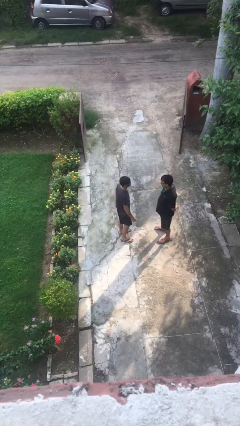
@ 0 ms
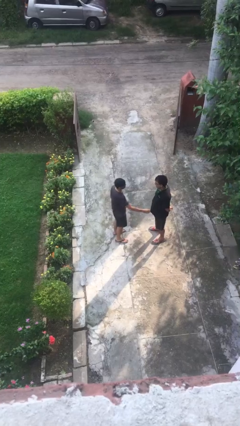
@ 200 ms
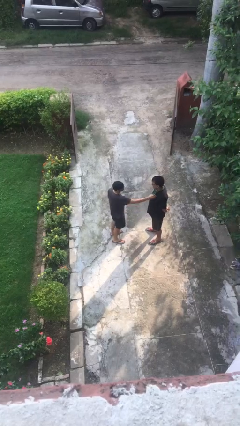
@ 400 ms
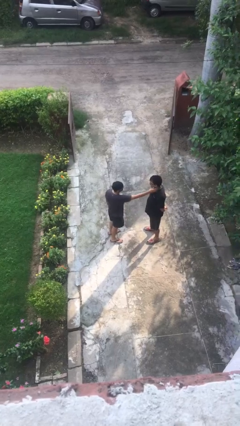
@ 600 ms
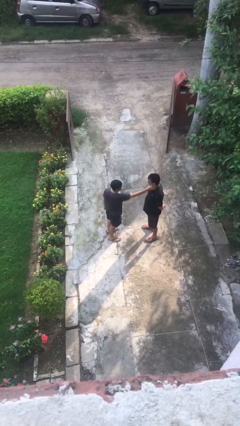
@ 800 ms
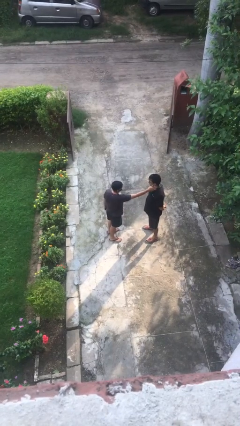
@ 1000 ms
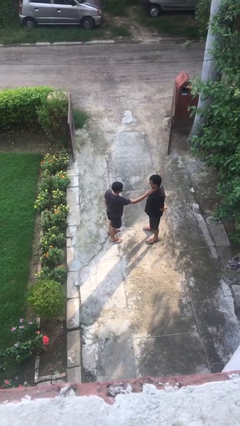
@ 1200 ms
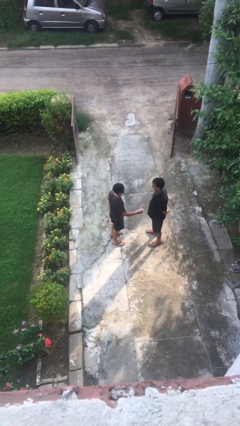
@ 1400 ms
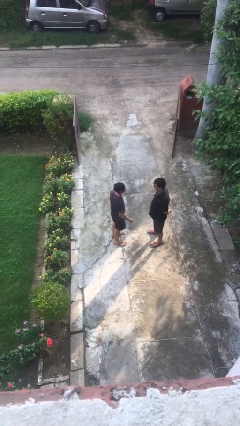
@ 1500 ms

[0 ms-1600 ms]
person touches face of person

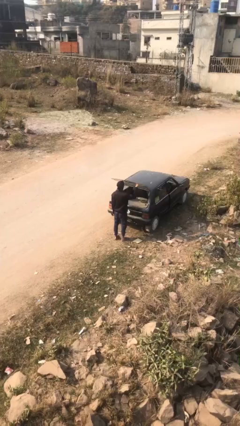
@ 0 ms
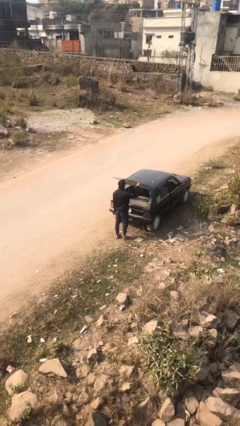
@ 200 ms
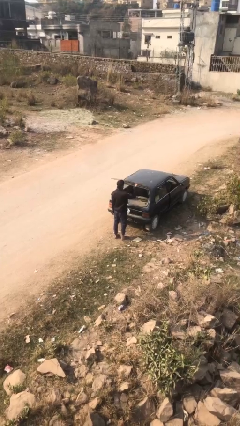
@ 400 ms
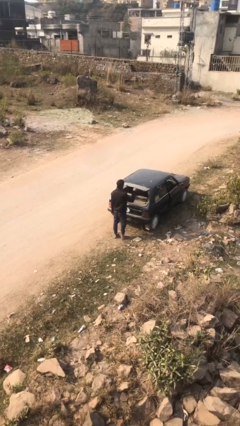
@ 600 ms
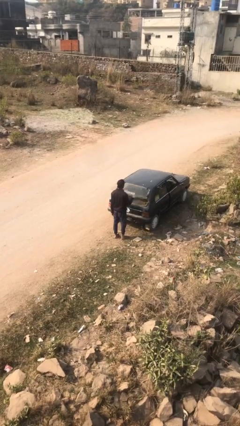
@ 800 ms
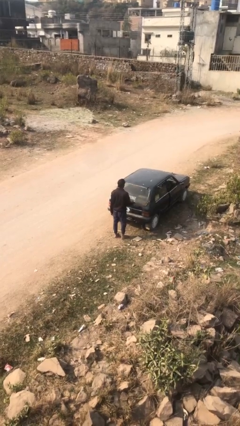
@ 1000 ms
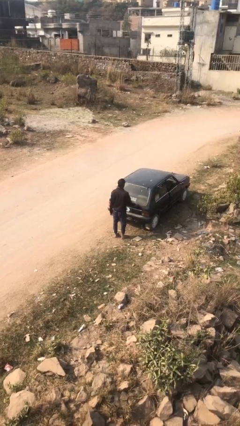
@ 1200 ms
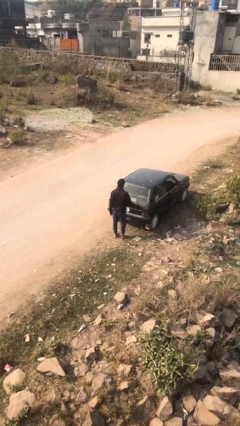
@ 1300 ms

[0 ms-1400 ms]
person closes car trunk

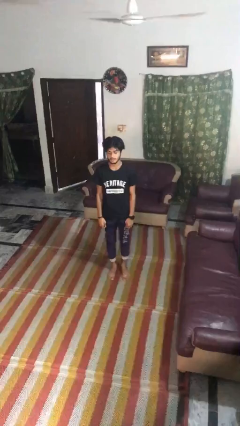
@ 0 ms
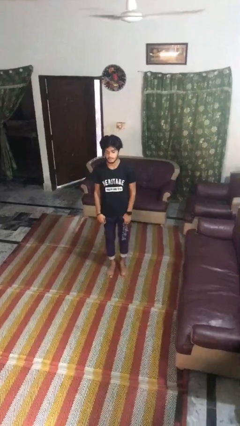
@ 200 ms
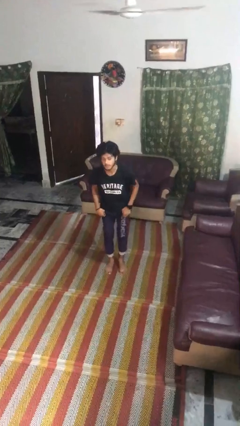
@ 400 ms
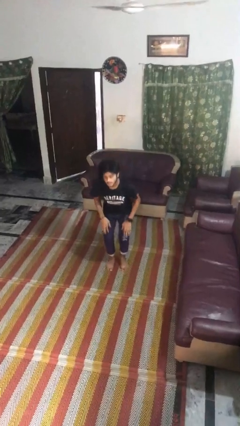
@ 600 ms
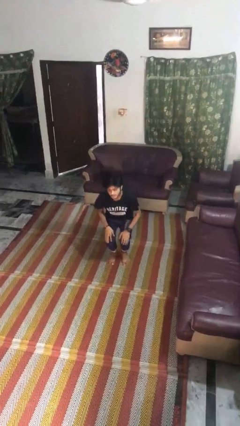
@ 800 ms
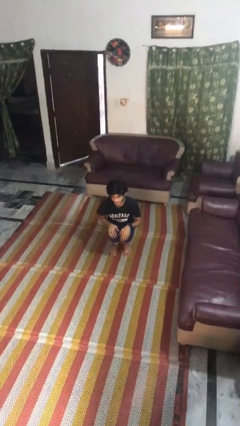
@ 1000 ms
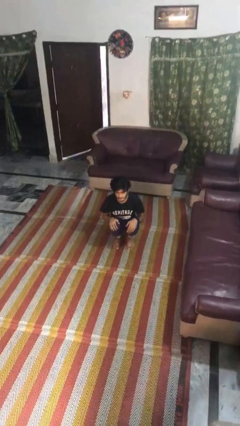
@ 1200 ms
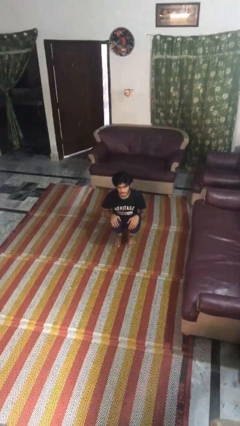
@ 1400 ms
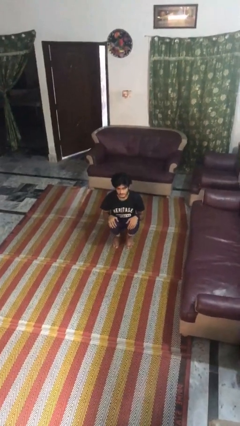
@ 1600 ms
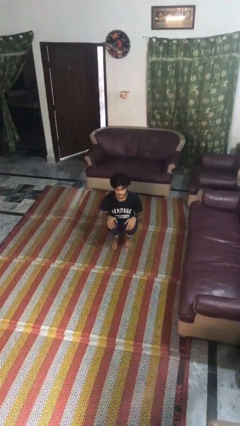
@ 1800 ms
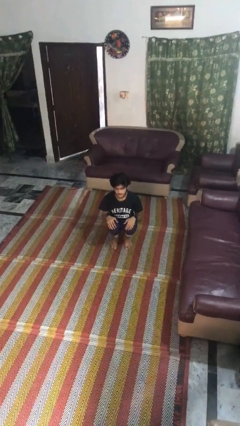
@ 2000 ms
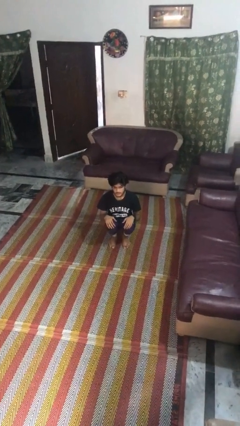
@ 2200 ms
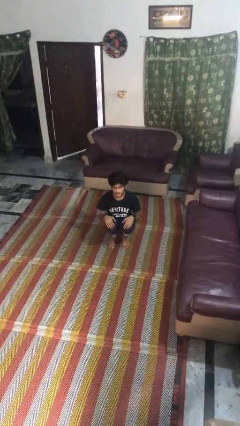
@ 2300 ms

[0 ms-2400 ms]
person squats

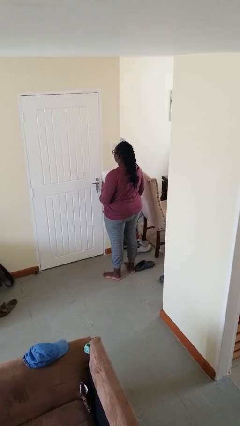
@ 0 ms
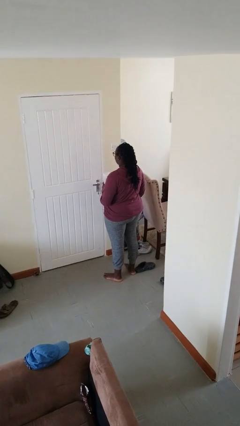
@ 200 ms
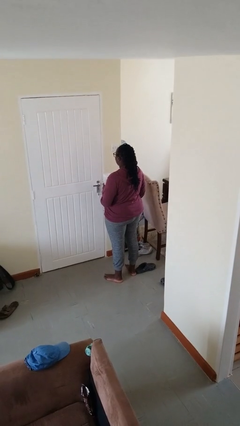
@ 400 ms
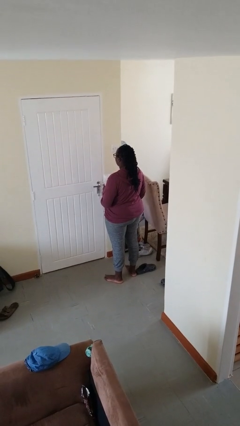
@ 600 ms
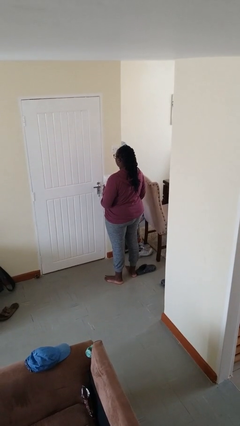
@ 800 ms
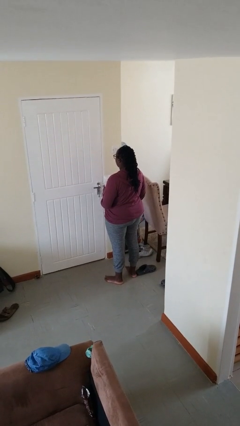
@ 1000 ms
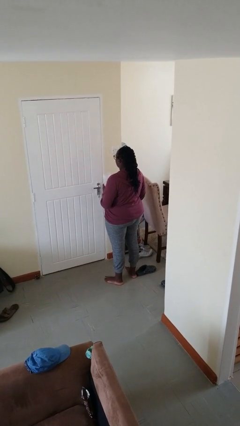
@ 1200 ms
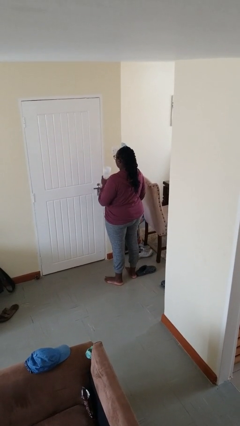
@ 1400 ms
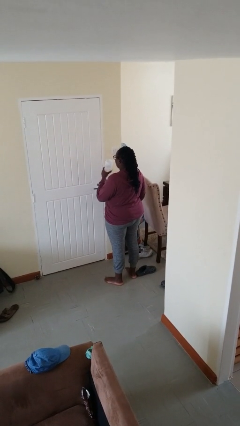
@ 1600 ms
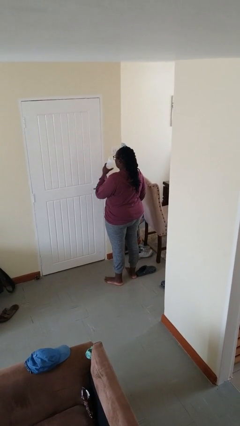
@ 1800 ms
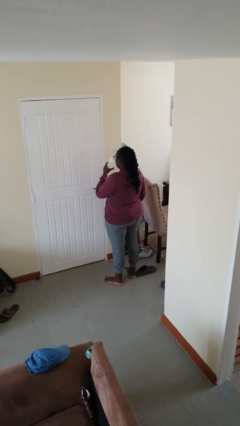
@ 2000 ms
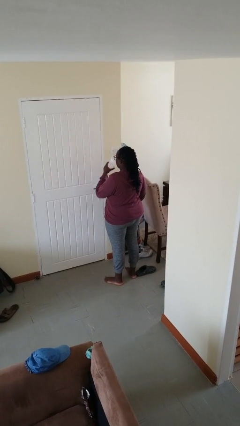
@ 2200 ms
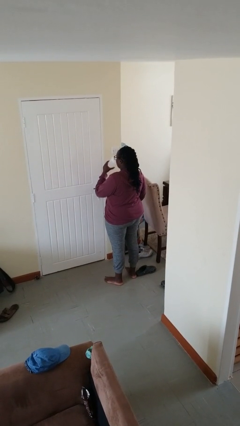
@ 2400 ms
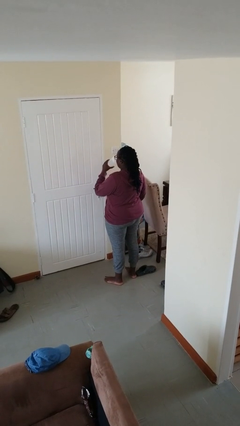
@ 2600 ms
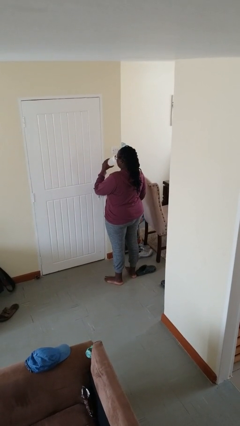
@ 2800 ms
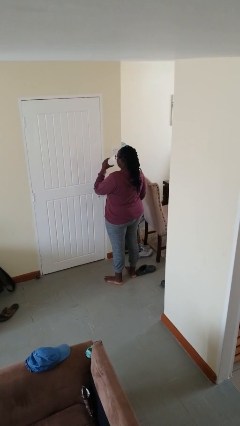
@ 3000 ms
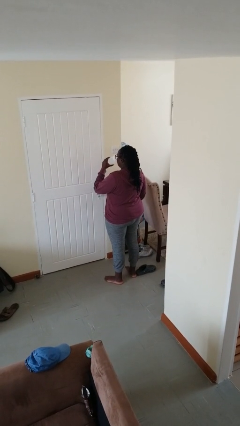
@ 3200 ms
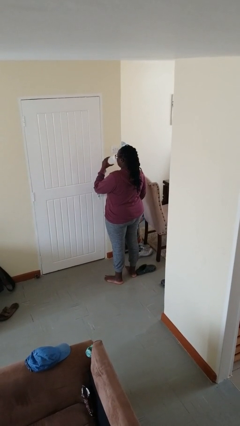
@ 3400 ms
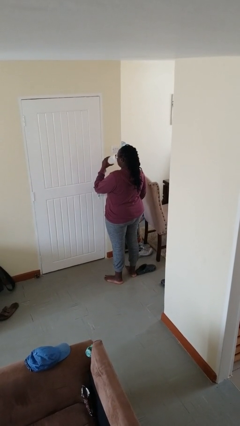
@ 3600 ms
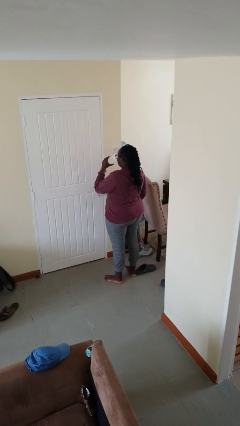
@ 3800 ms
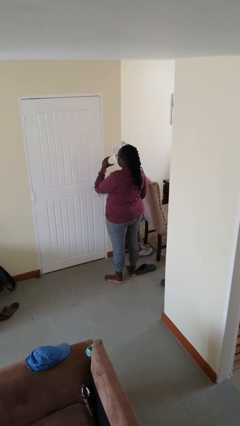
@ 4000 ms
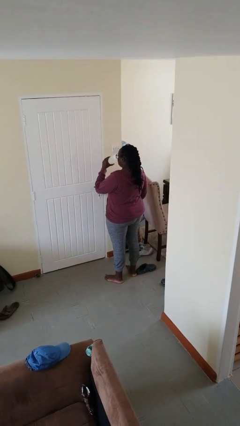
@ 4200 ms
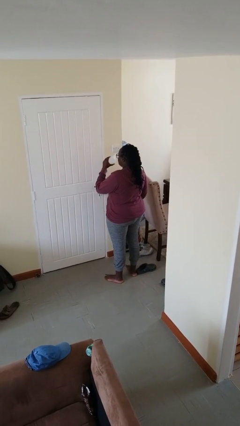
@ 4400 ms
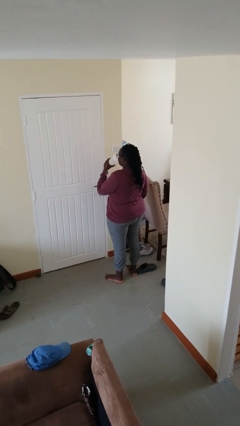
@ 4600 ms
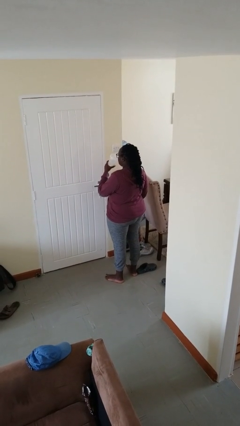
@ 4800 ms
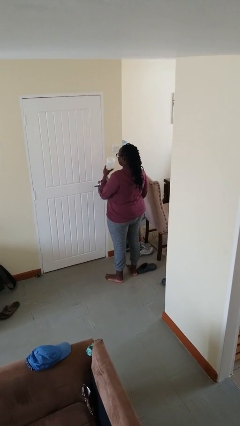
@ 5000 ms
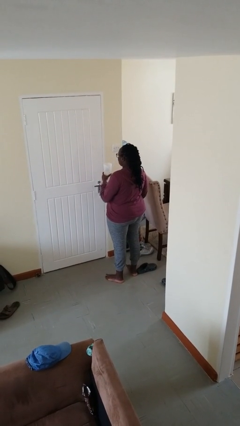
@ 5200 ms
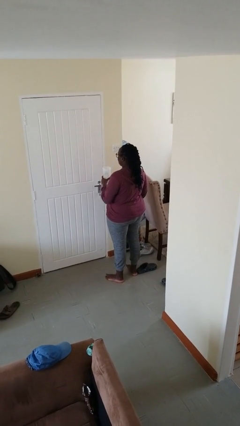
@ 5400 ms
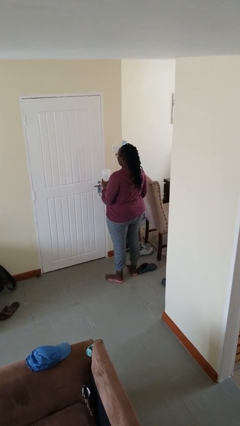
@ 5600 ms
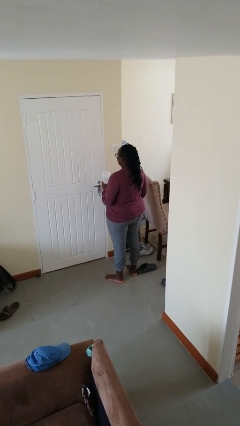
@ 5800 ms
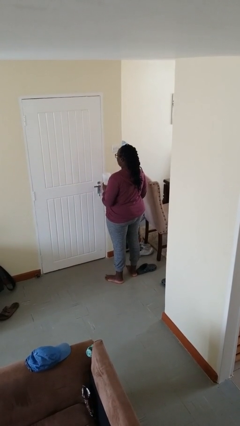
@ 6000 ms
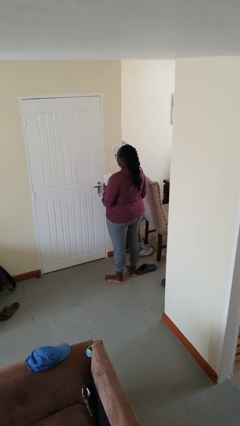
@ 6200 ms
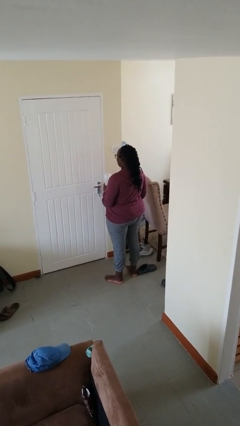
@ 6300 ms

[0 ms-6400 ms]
person drinks from bottle

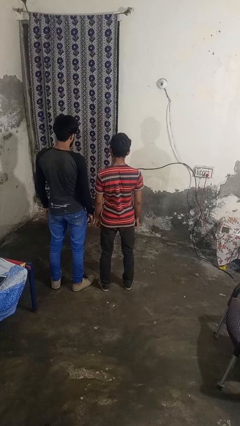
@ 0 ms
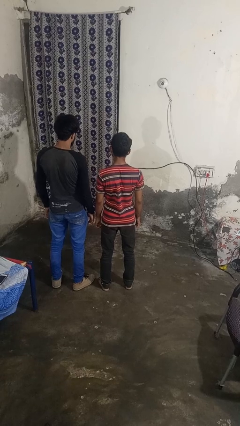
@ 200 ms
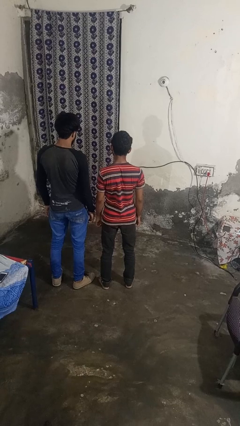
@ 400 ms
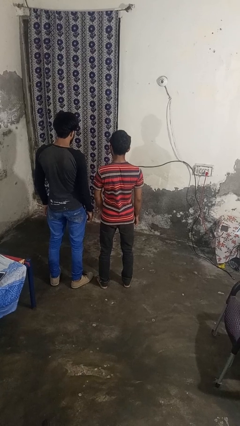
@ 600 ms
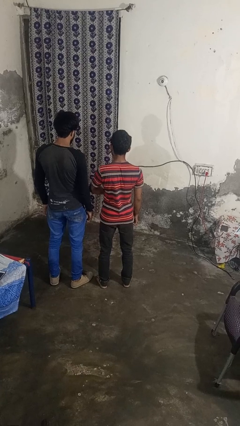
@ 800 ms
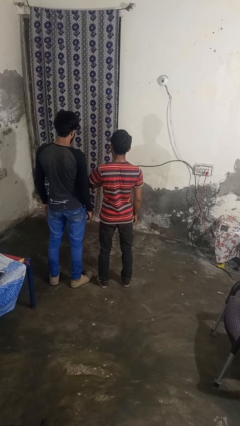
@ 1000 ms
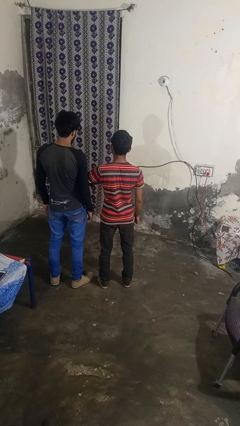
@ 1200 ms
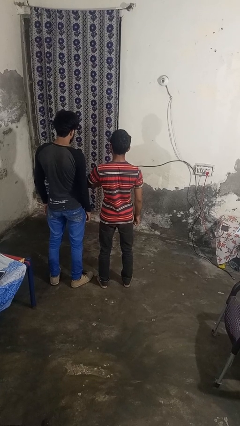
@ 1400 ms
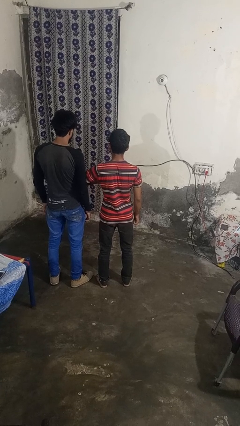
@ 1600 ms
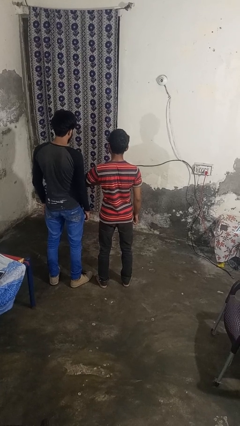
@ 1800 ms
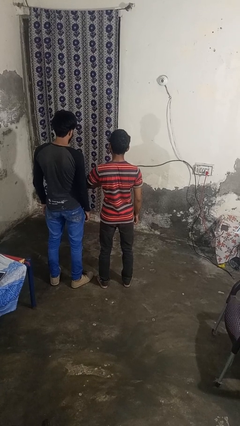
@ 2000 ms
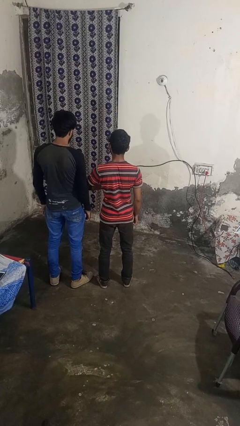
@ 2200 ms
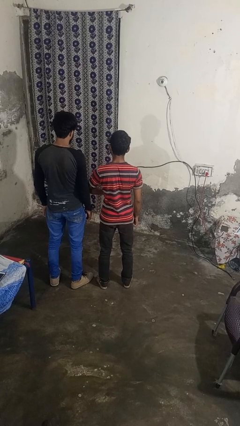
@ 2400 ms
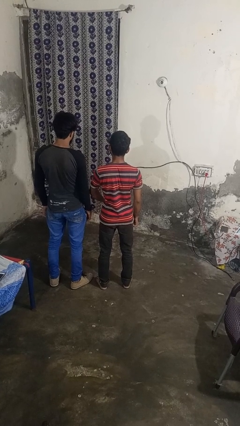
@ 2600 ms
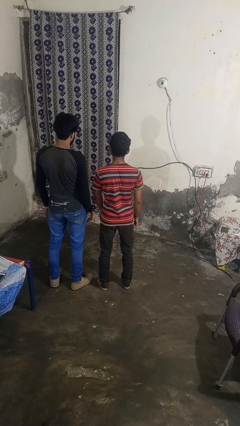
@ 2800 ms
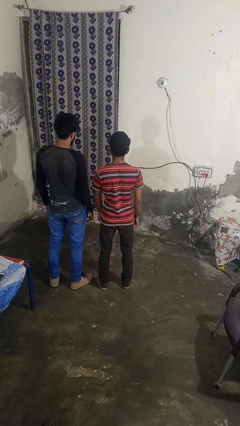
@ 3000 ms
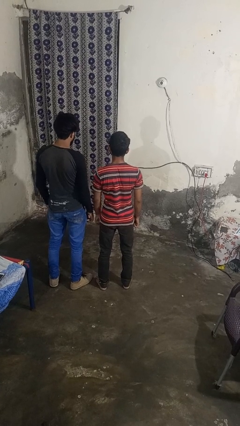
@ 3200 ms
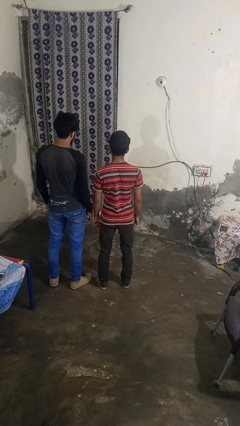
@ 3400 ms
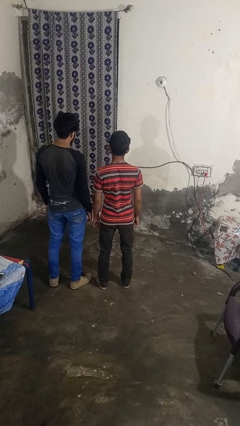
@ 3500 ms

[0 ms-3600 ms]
person nudges person with elbow

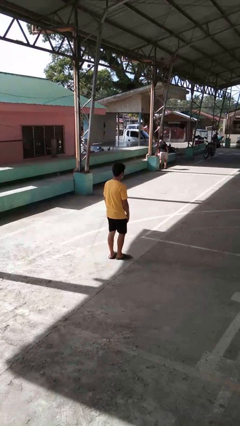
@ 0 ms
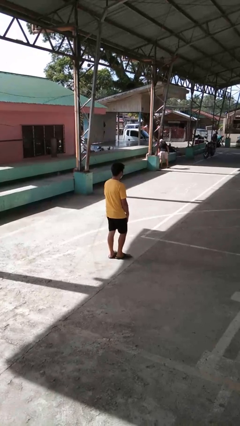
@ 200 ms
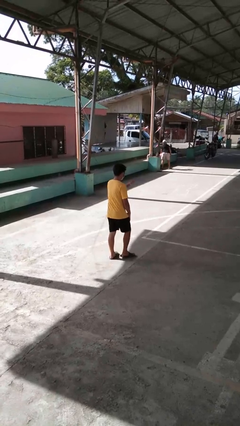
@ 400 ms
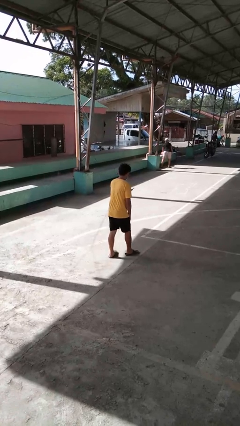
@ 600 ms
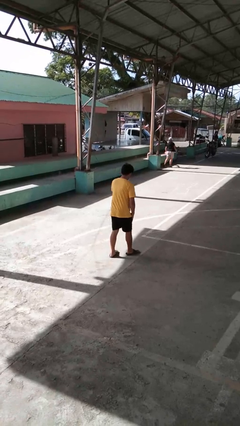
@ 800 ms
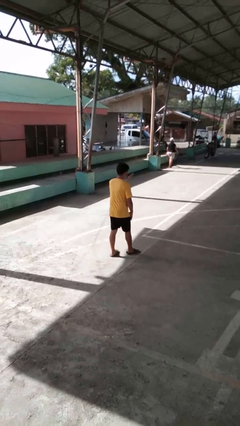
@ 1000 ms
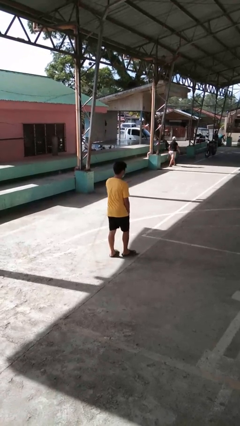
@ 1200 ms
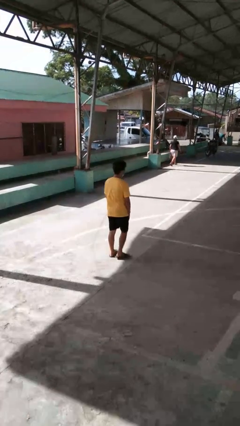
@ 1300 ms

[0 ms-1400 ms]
person karate chop

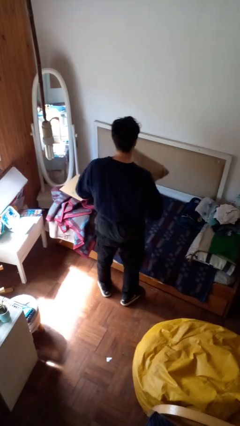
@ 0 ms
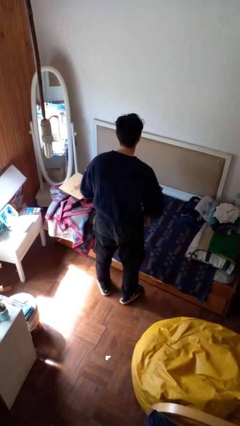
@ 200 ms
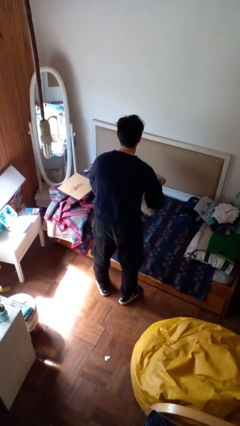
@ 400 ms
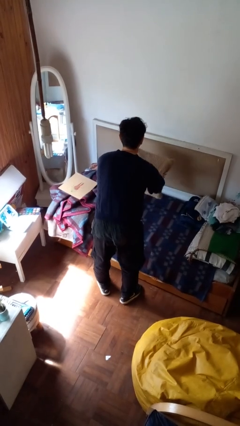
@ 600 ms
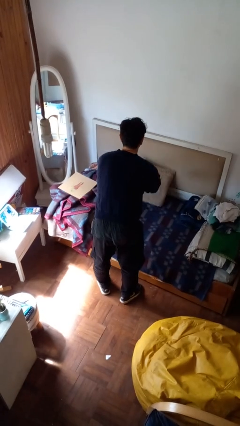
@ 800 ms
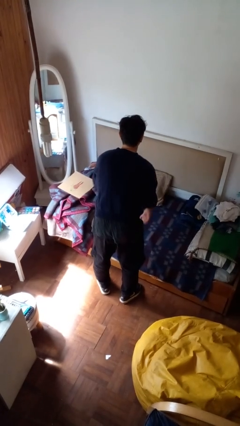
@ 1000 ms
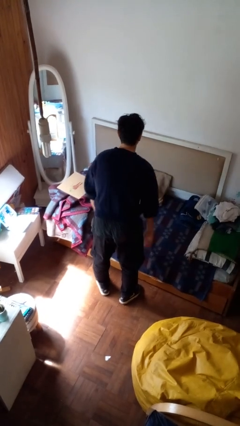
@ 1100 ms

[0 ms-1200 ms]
person puts down object on bed
